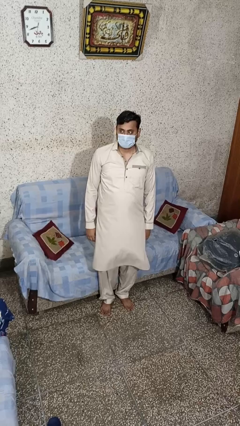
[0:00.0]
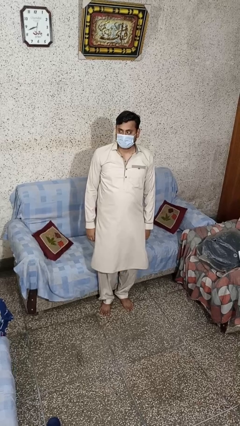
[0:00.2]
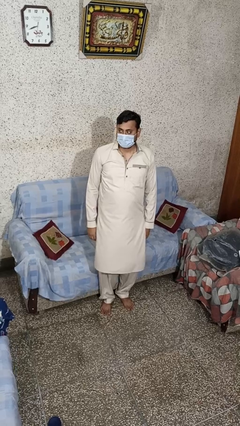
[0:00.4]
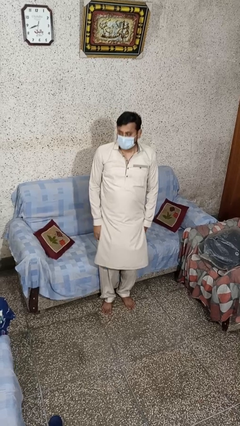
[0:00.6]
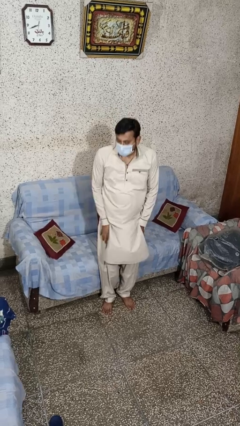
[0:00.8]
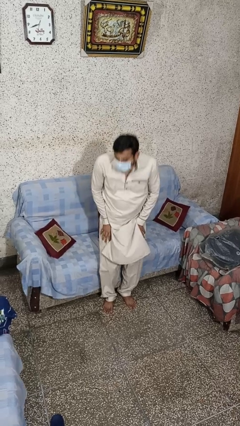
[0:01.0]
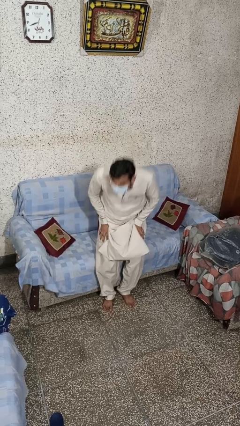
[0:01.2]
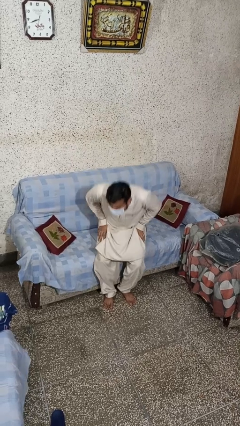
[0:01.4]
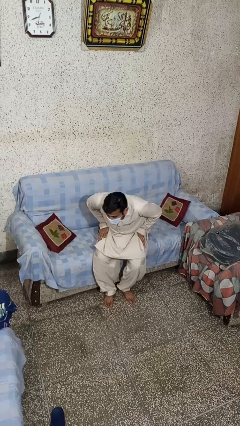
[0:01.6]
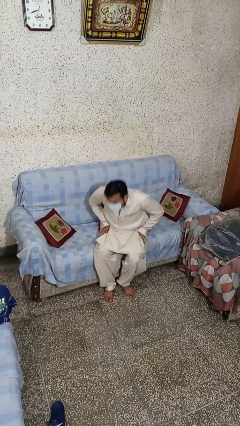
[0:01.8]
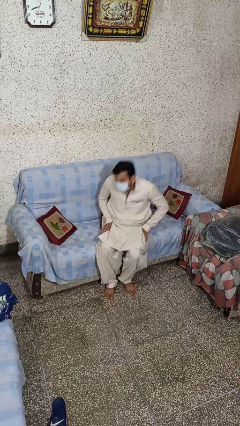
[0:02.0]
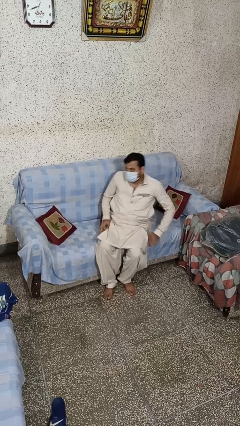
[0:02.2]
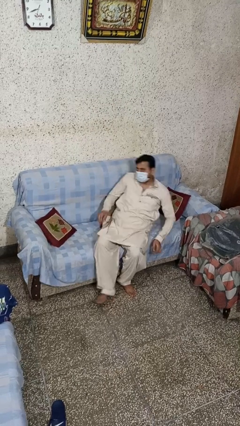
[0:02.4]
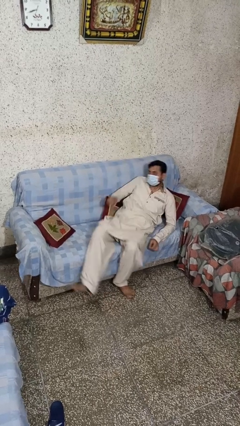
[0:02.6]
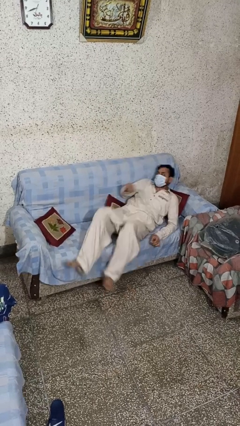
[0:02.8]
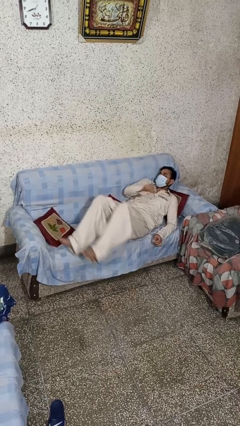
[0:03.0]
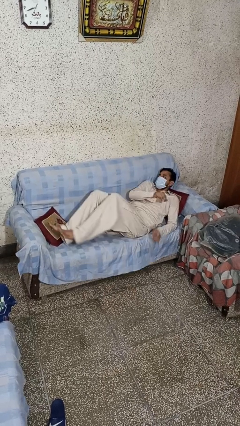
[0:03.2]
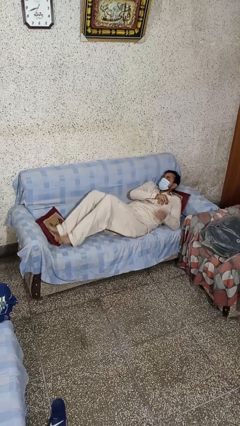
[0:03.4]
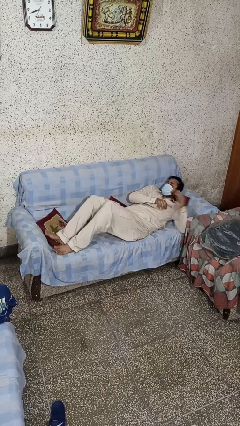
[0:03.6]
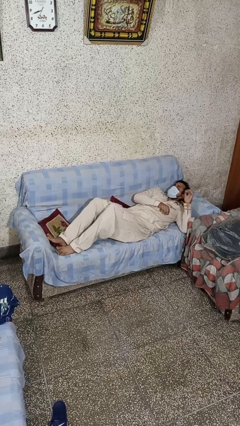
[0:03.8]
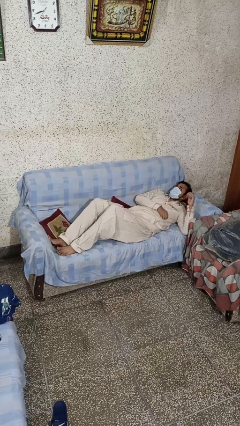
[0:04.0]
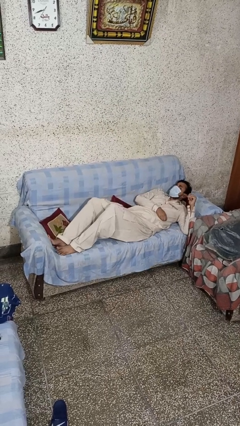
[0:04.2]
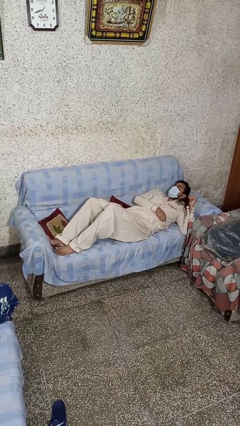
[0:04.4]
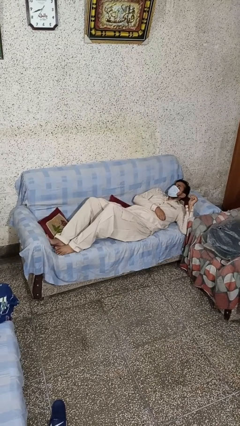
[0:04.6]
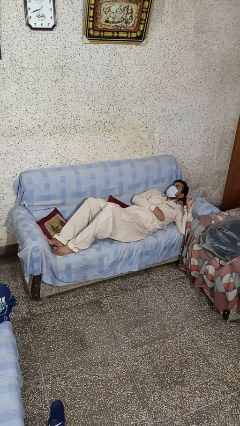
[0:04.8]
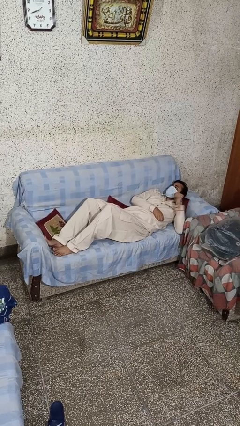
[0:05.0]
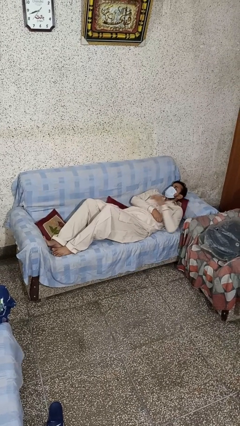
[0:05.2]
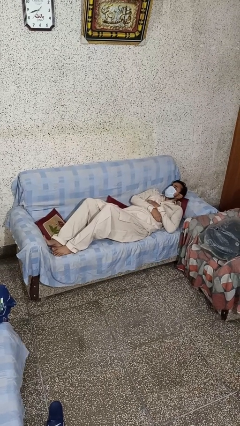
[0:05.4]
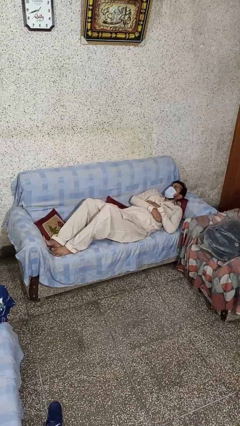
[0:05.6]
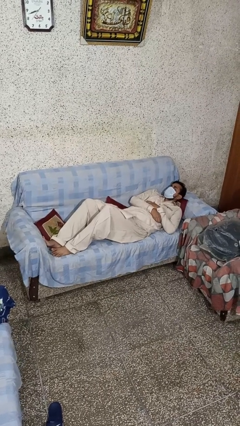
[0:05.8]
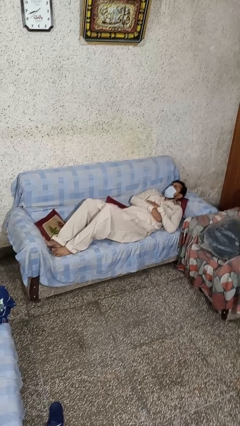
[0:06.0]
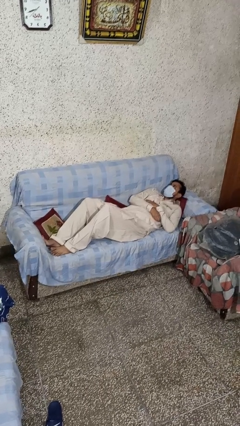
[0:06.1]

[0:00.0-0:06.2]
person lies down on couch

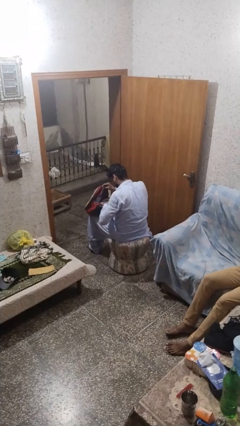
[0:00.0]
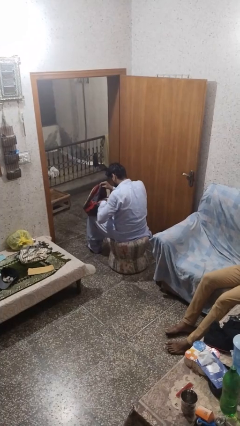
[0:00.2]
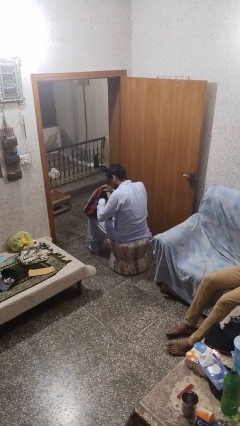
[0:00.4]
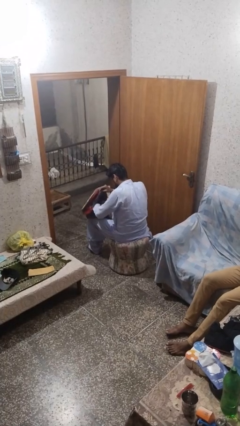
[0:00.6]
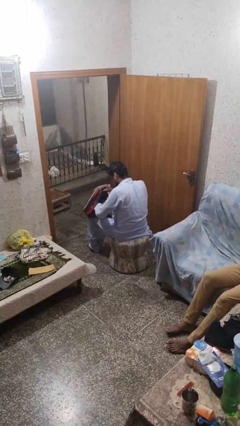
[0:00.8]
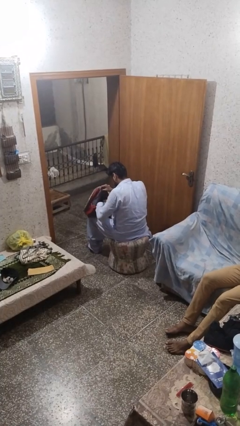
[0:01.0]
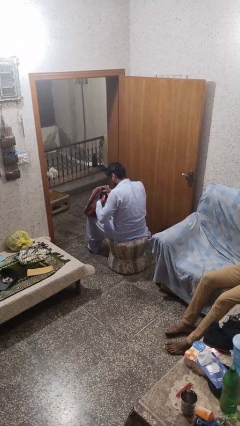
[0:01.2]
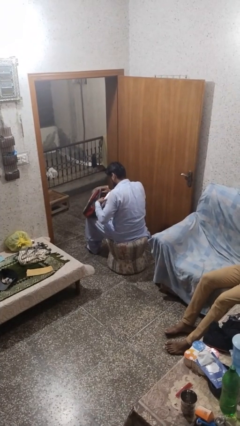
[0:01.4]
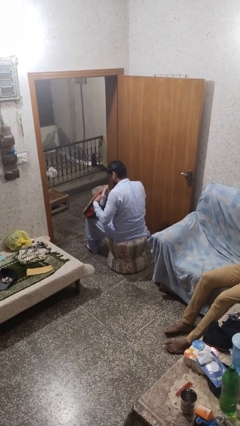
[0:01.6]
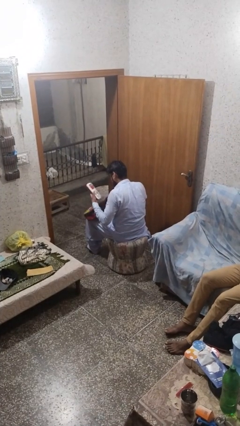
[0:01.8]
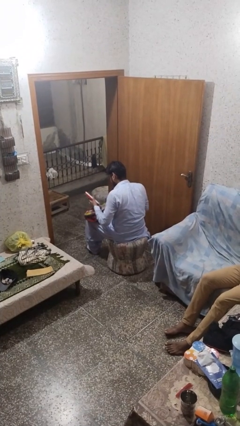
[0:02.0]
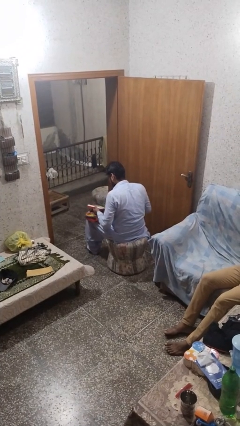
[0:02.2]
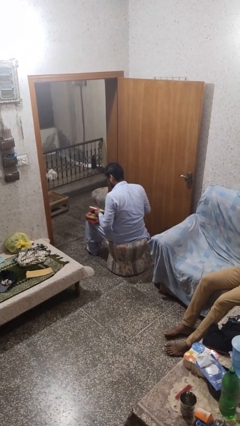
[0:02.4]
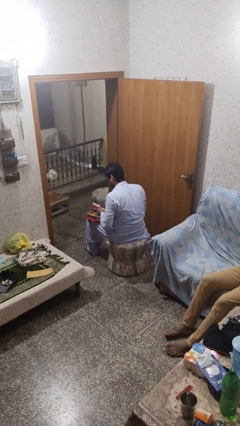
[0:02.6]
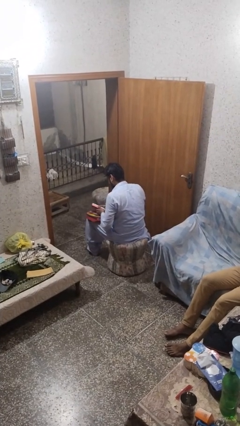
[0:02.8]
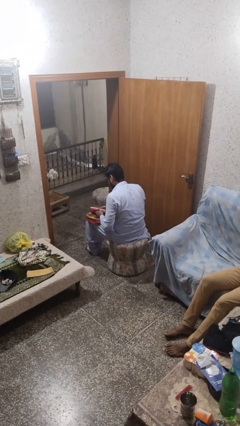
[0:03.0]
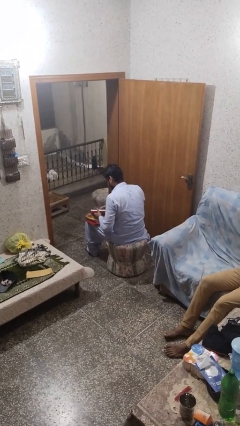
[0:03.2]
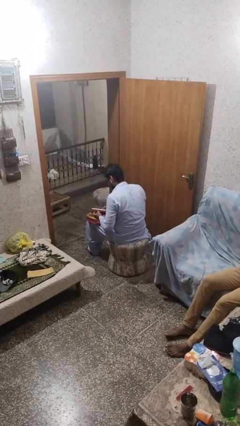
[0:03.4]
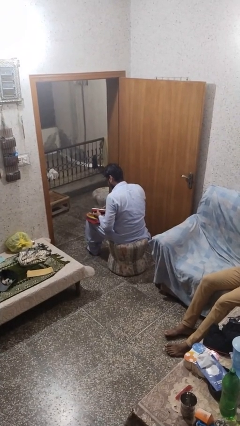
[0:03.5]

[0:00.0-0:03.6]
person takes object from backpack

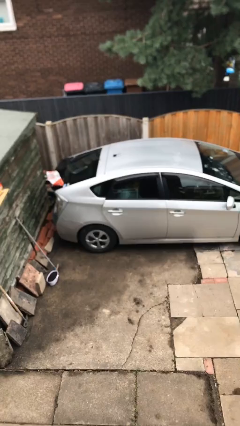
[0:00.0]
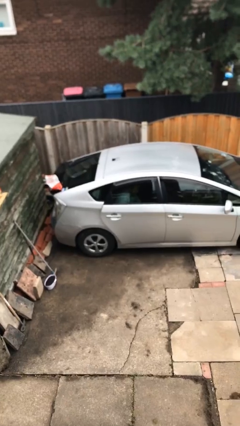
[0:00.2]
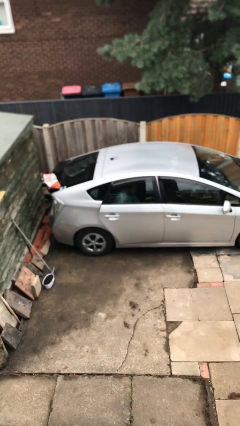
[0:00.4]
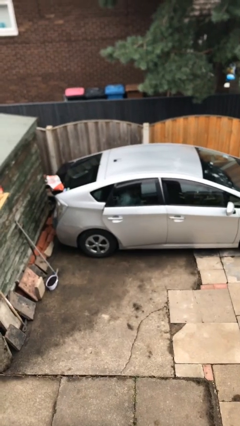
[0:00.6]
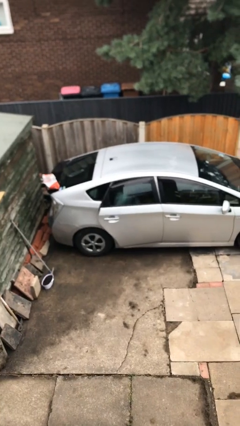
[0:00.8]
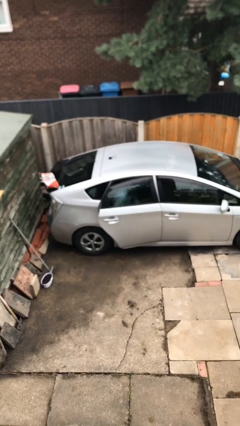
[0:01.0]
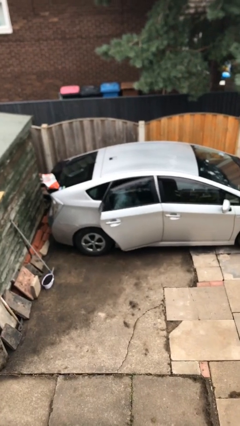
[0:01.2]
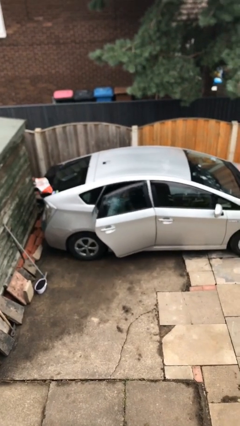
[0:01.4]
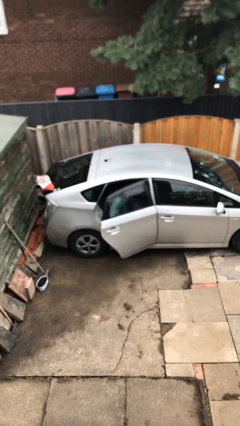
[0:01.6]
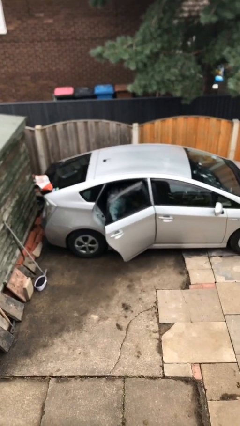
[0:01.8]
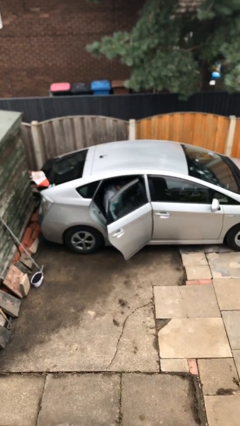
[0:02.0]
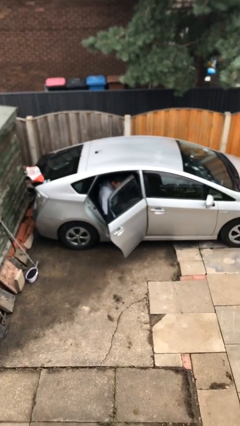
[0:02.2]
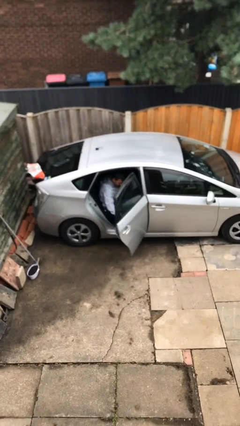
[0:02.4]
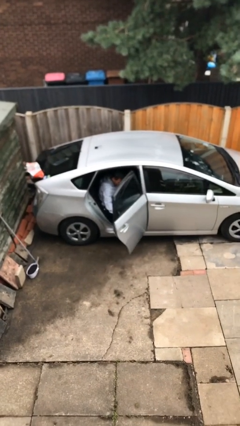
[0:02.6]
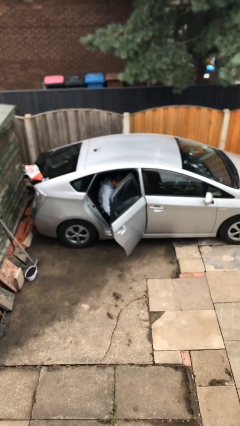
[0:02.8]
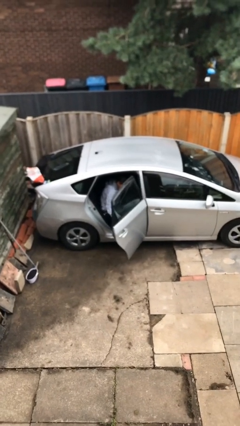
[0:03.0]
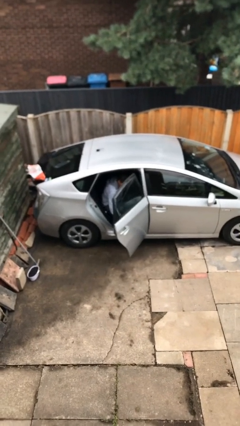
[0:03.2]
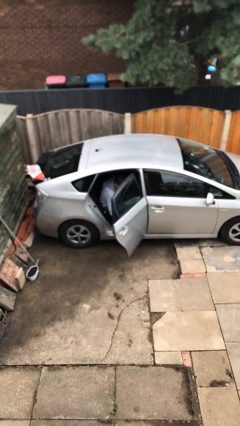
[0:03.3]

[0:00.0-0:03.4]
person opens car door

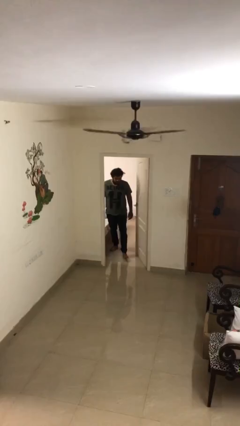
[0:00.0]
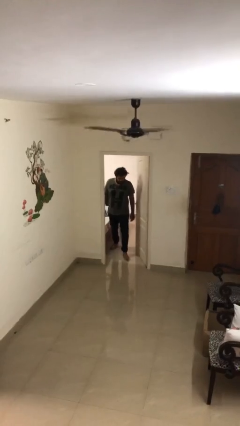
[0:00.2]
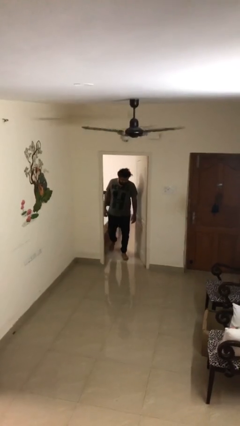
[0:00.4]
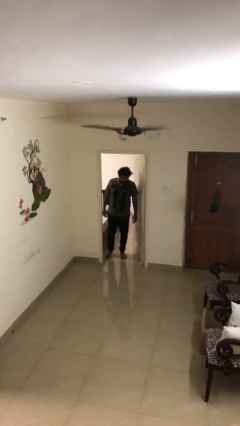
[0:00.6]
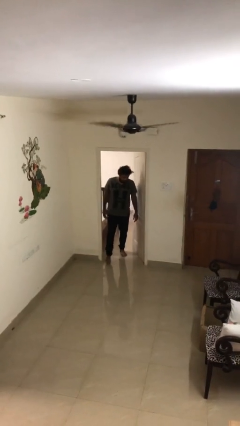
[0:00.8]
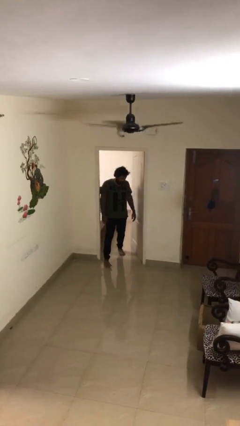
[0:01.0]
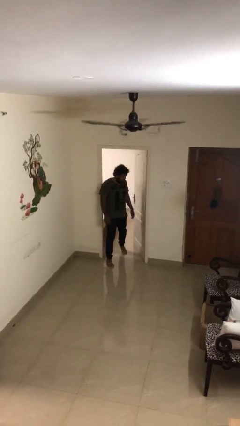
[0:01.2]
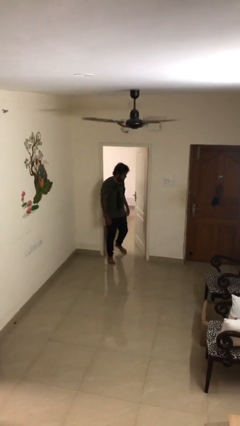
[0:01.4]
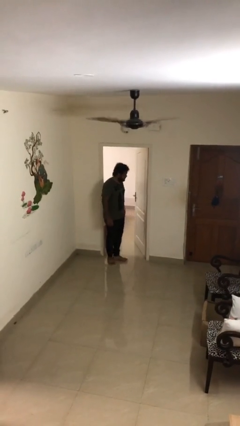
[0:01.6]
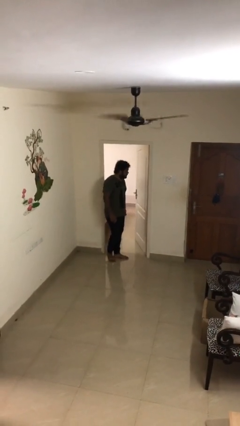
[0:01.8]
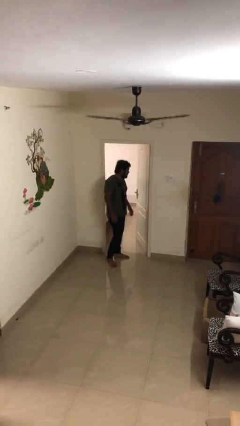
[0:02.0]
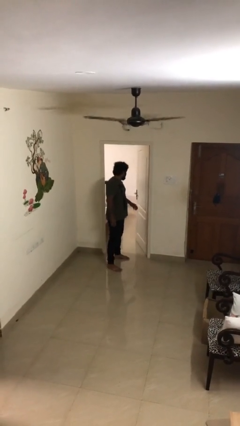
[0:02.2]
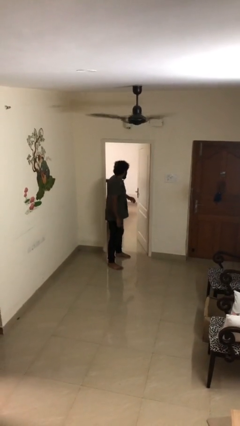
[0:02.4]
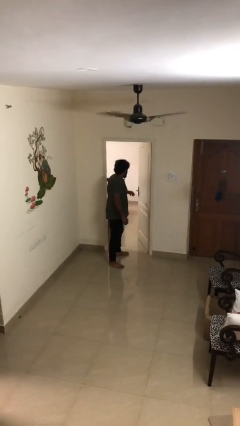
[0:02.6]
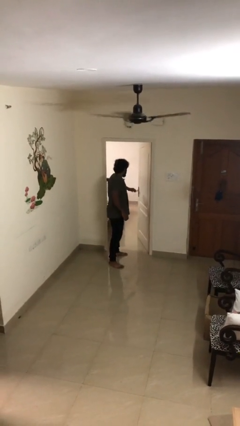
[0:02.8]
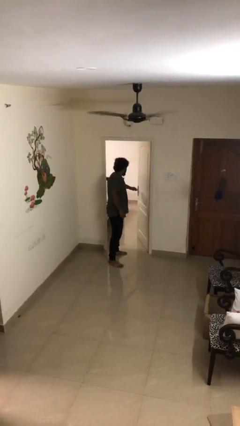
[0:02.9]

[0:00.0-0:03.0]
person enters scene through structure

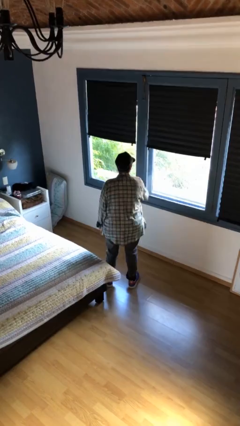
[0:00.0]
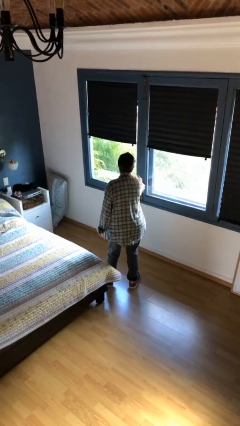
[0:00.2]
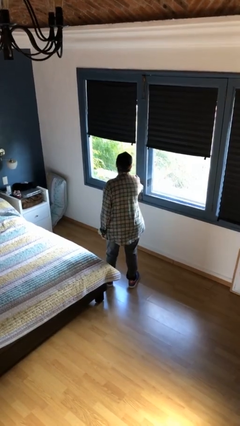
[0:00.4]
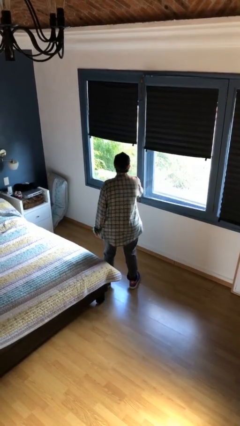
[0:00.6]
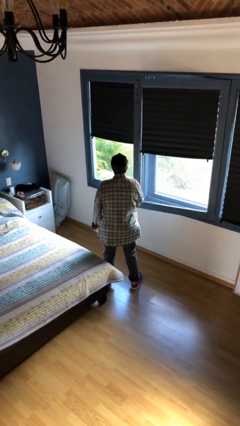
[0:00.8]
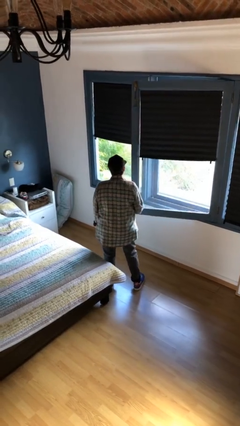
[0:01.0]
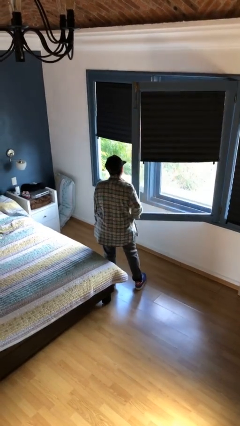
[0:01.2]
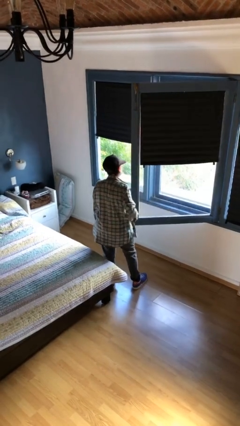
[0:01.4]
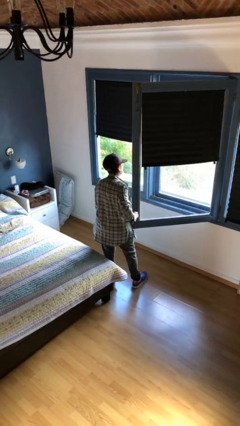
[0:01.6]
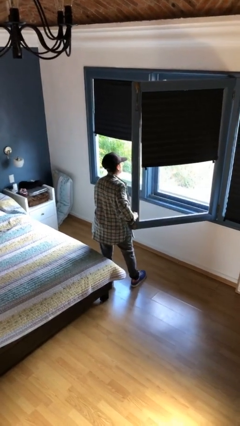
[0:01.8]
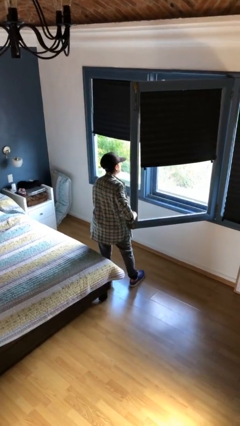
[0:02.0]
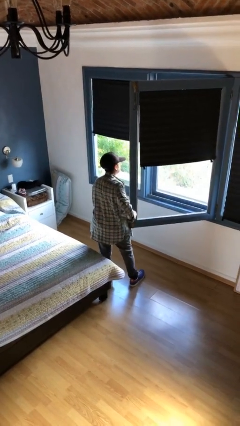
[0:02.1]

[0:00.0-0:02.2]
person opens home window
